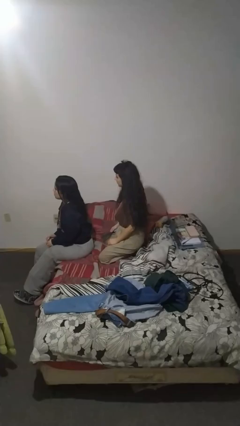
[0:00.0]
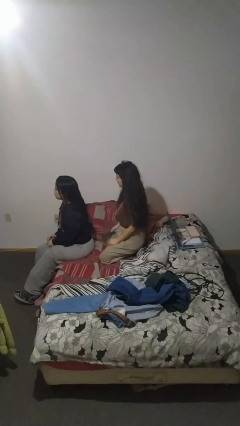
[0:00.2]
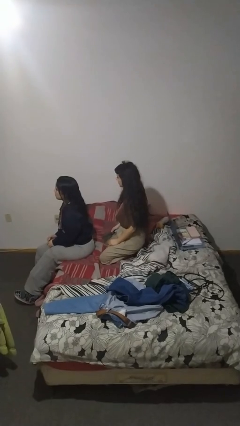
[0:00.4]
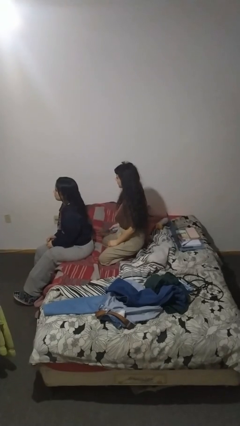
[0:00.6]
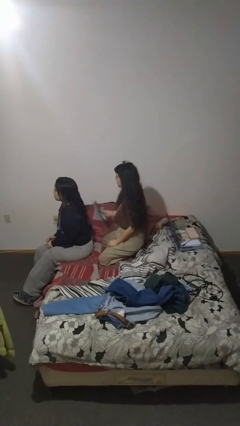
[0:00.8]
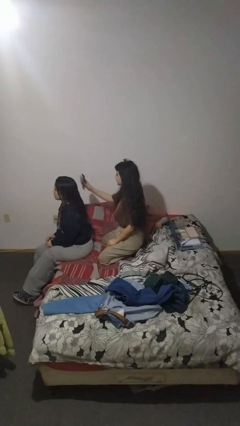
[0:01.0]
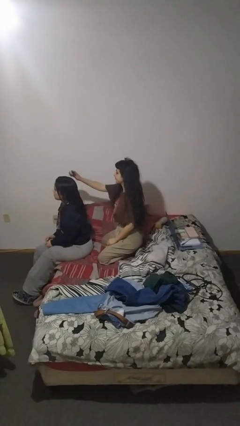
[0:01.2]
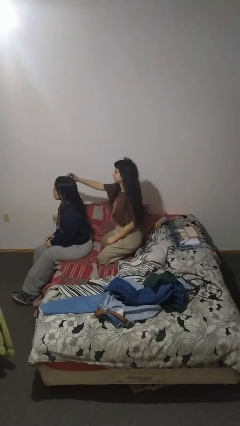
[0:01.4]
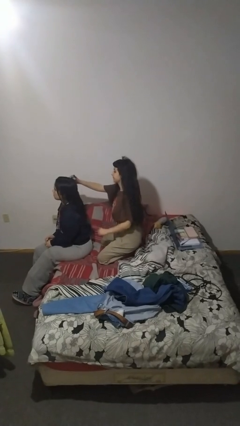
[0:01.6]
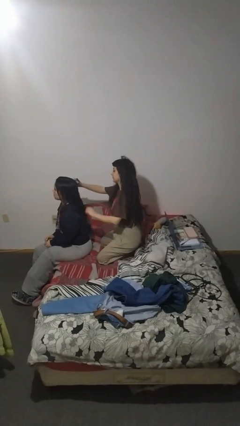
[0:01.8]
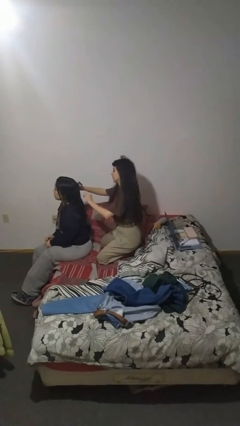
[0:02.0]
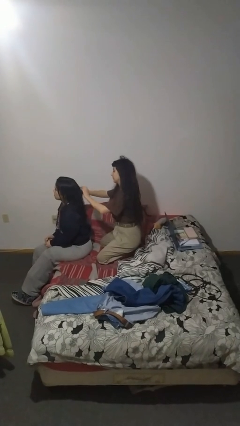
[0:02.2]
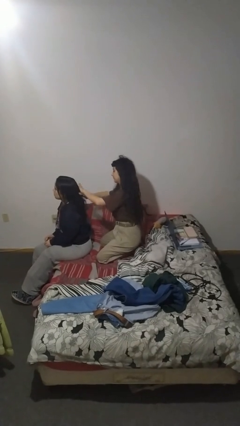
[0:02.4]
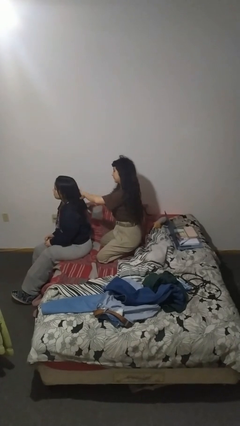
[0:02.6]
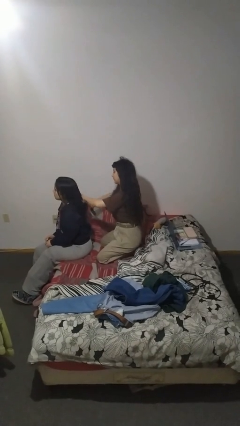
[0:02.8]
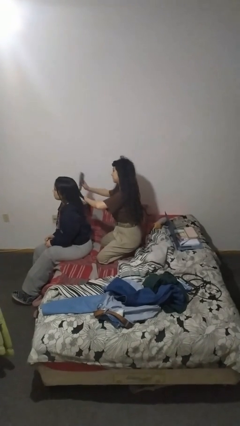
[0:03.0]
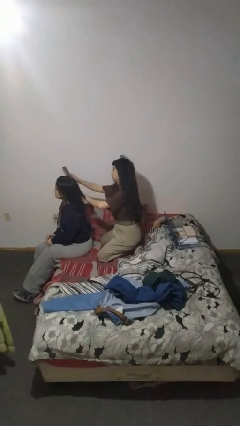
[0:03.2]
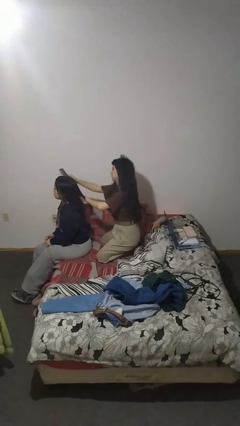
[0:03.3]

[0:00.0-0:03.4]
person brushes hair of person

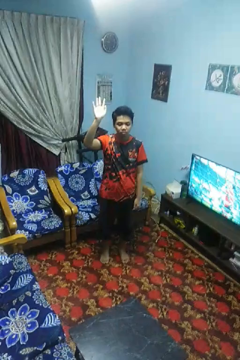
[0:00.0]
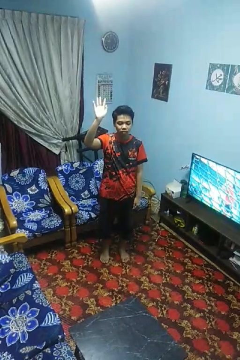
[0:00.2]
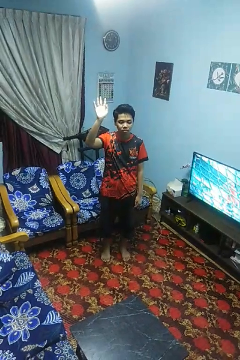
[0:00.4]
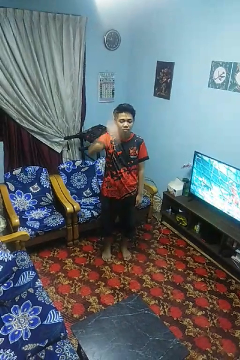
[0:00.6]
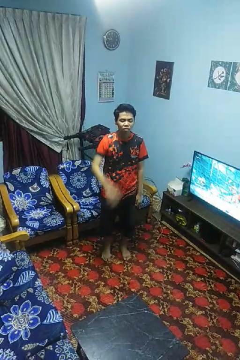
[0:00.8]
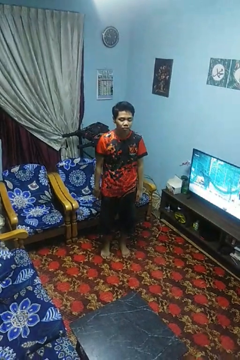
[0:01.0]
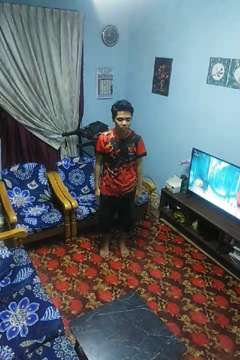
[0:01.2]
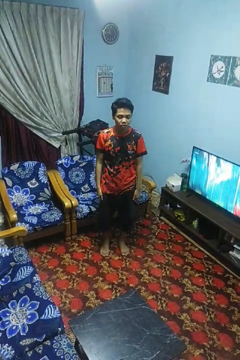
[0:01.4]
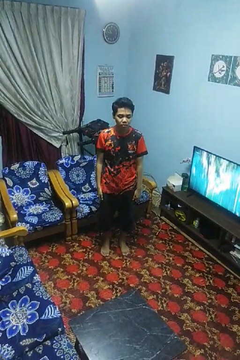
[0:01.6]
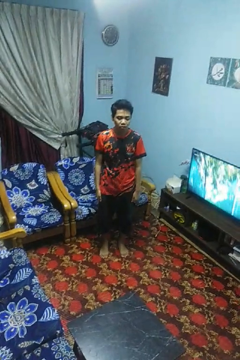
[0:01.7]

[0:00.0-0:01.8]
person gestures swipe down

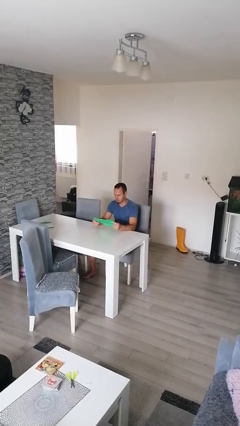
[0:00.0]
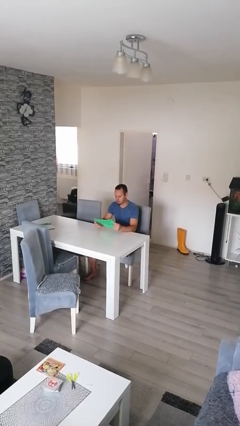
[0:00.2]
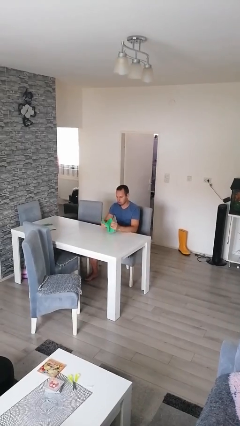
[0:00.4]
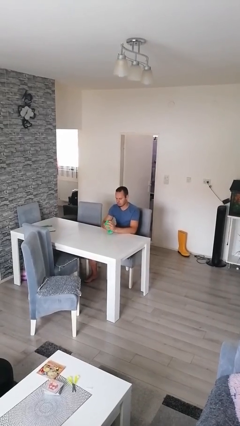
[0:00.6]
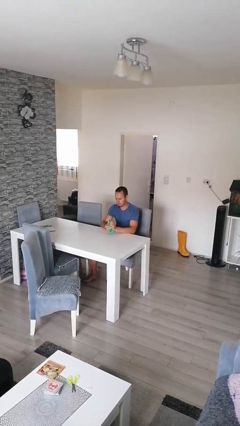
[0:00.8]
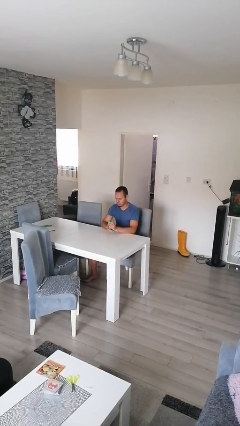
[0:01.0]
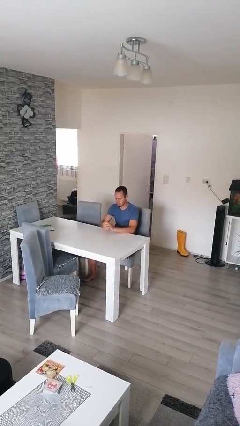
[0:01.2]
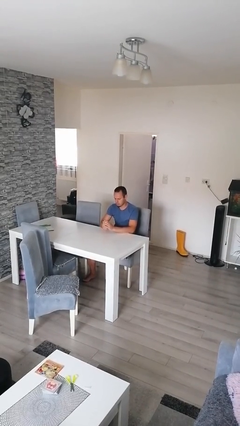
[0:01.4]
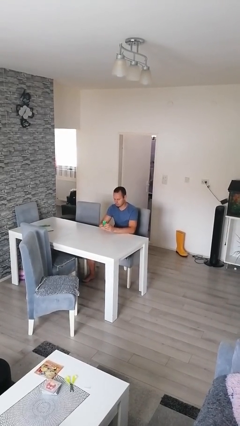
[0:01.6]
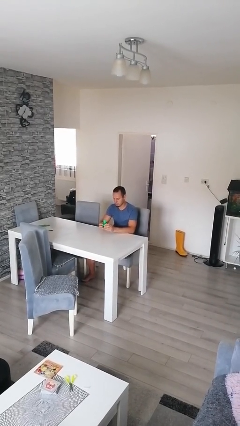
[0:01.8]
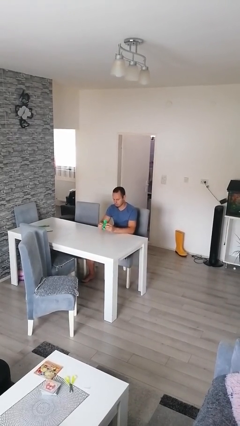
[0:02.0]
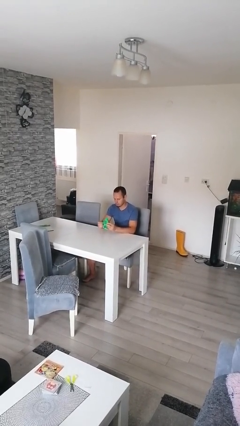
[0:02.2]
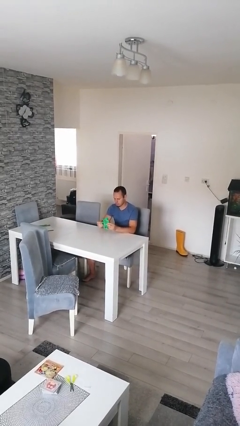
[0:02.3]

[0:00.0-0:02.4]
person crumples paper

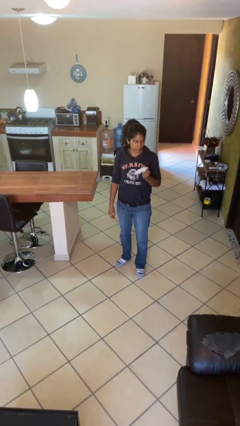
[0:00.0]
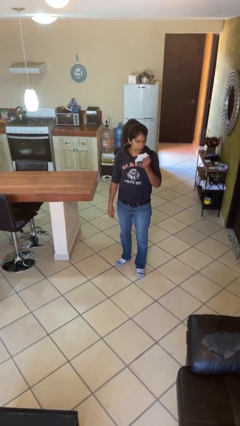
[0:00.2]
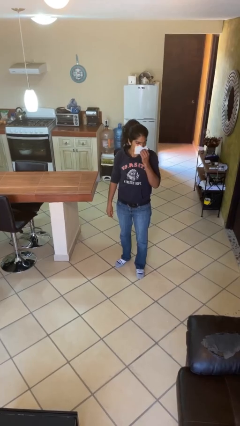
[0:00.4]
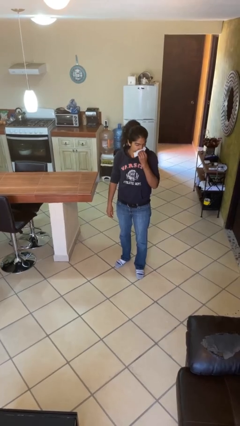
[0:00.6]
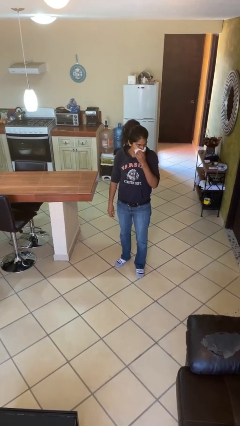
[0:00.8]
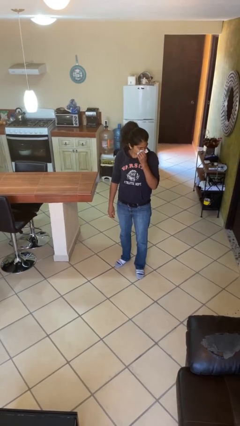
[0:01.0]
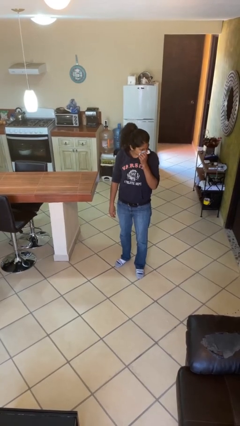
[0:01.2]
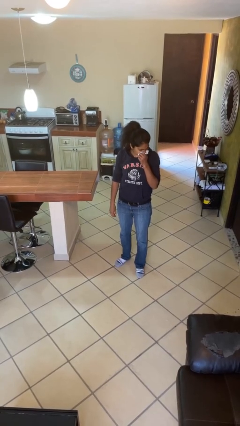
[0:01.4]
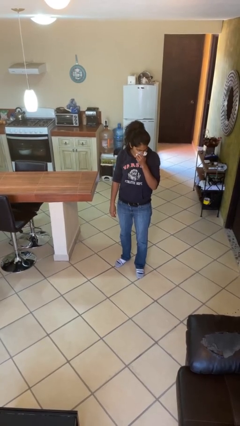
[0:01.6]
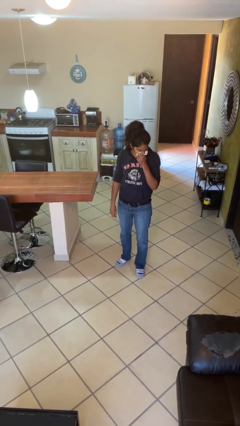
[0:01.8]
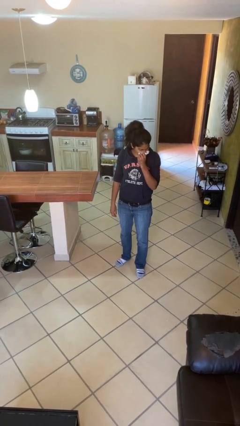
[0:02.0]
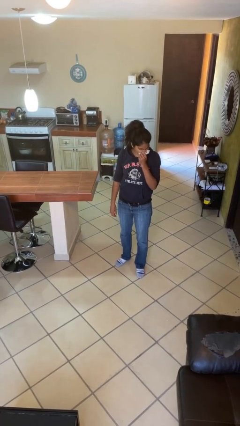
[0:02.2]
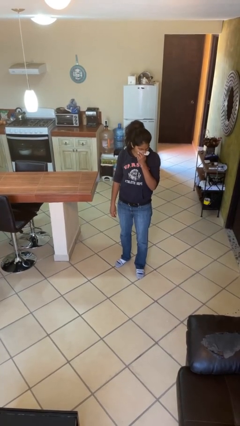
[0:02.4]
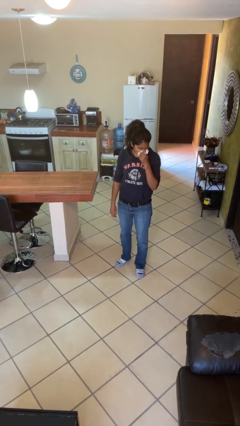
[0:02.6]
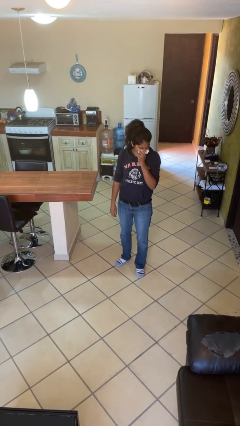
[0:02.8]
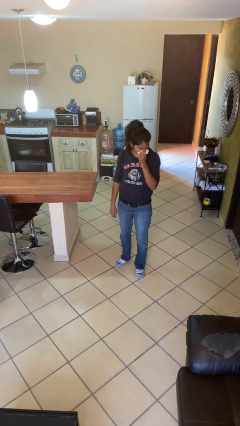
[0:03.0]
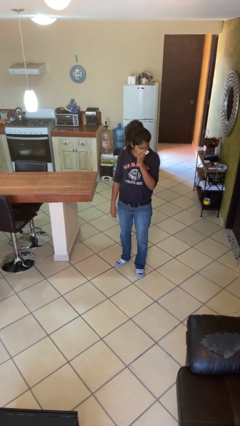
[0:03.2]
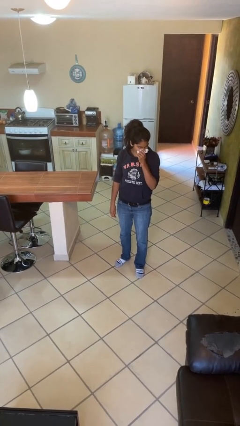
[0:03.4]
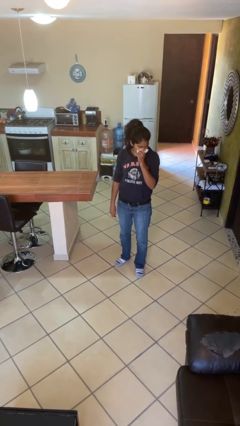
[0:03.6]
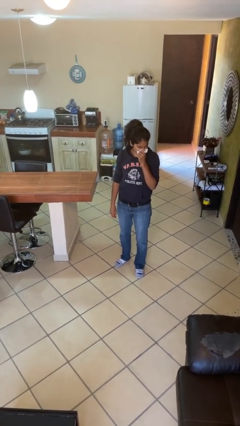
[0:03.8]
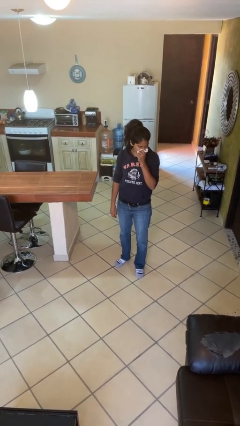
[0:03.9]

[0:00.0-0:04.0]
person blows nose

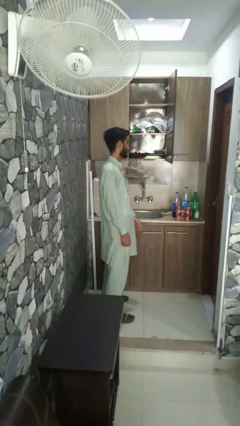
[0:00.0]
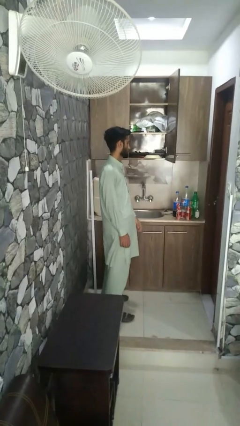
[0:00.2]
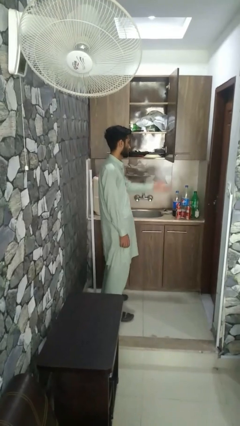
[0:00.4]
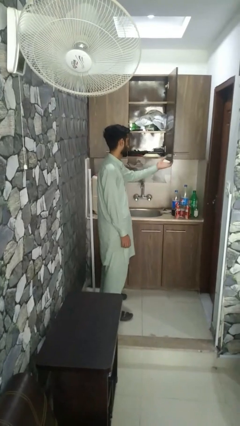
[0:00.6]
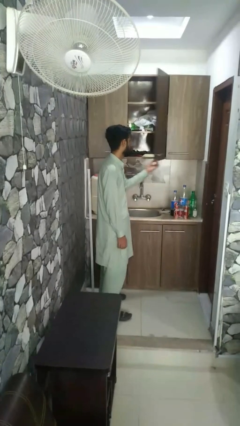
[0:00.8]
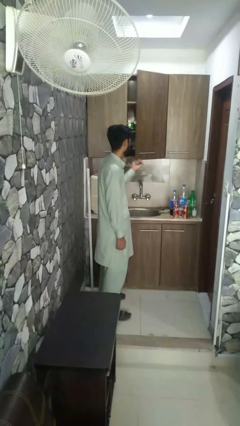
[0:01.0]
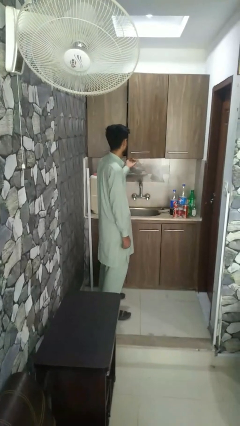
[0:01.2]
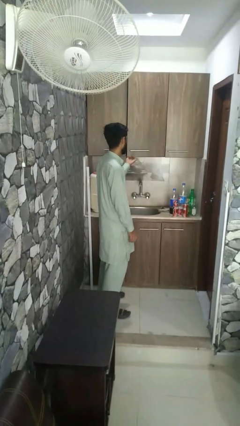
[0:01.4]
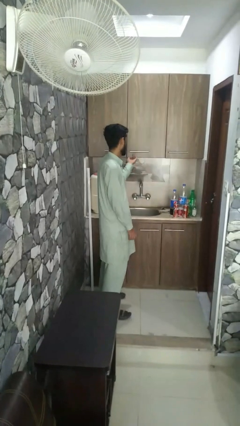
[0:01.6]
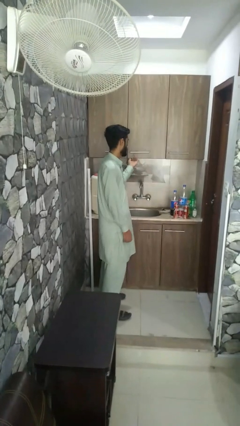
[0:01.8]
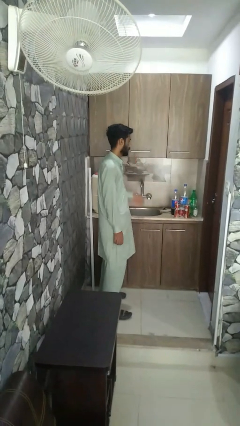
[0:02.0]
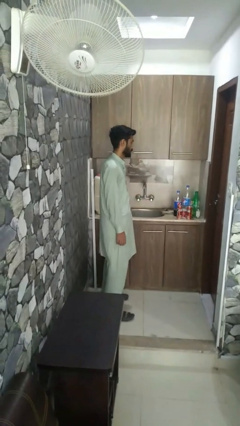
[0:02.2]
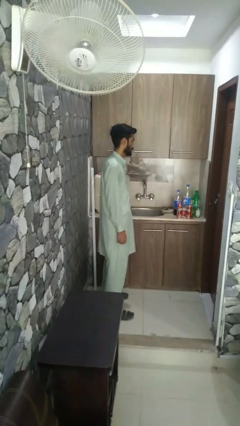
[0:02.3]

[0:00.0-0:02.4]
person closes closet door

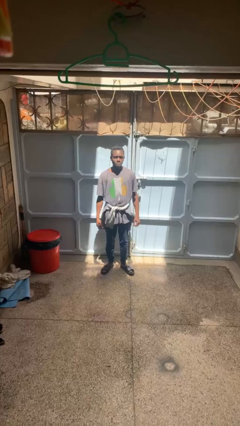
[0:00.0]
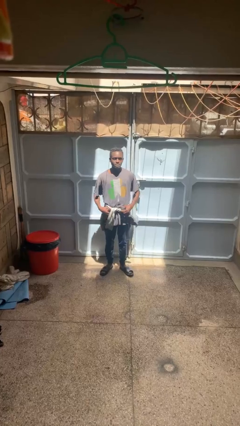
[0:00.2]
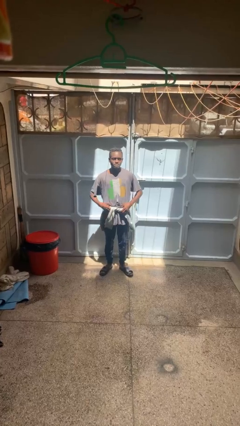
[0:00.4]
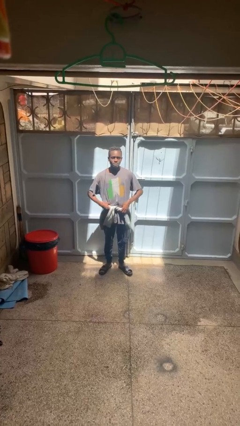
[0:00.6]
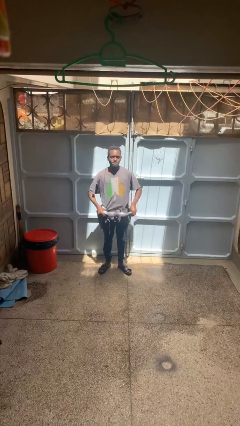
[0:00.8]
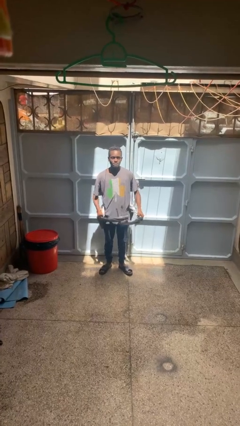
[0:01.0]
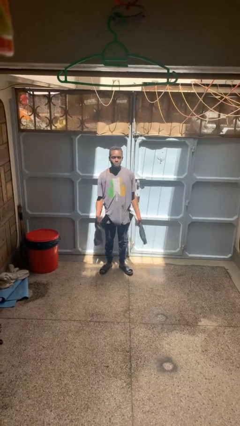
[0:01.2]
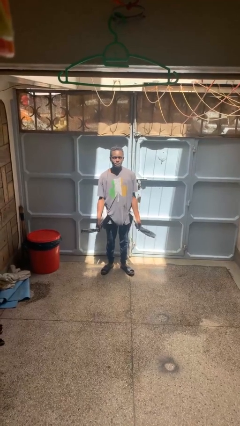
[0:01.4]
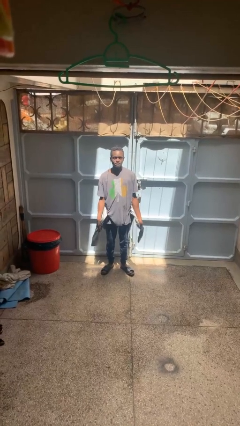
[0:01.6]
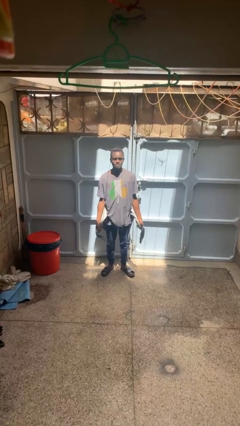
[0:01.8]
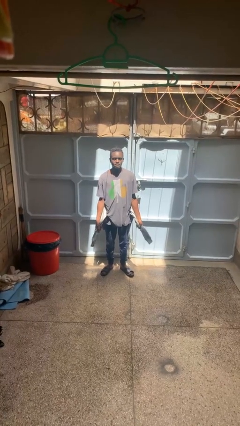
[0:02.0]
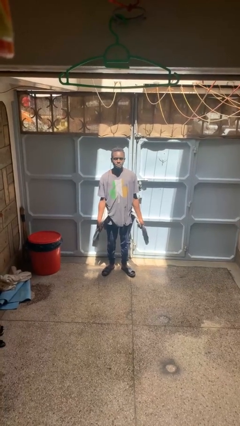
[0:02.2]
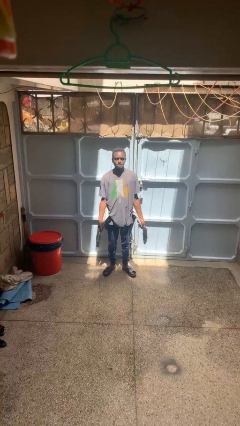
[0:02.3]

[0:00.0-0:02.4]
person unties jacket around waist

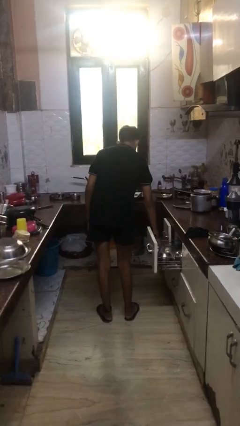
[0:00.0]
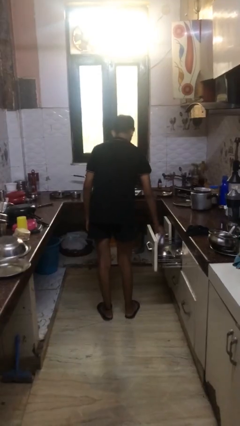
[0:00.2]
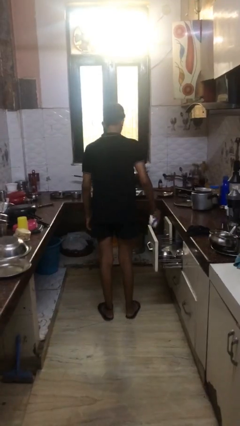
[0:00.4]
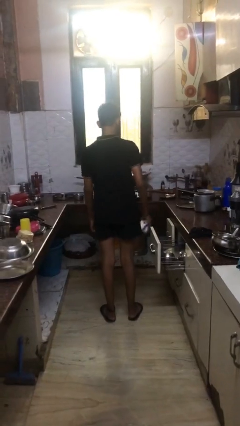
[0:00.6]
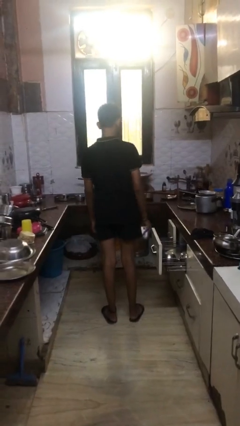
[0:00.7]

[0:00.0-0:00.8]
person takes object from kitchen drawer
